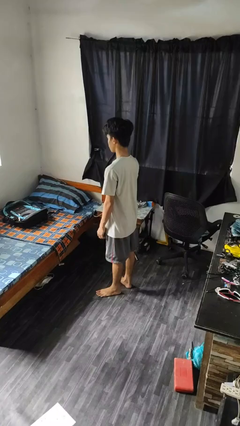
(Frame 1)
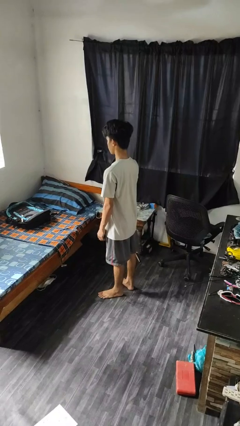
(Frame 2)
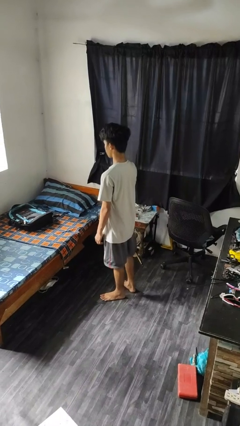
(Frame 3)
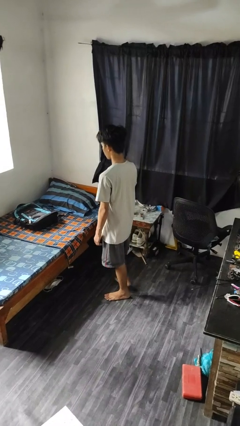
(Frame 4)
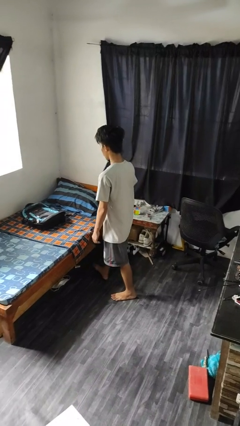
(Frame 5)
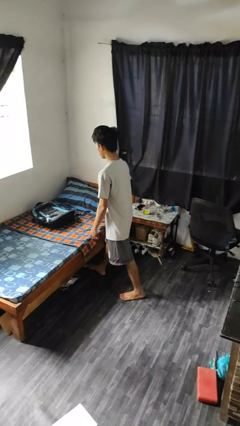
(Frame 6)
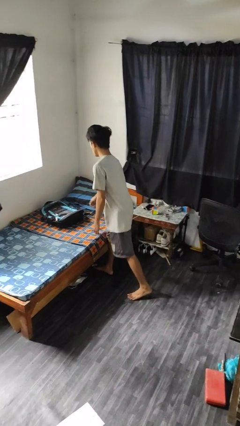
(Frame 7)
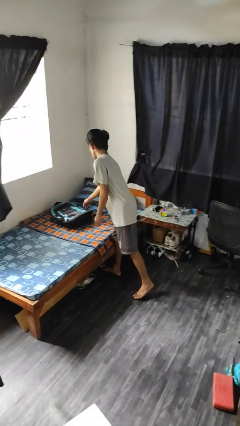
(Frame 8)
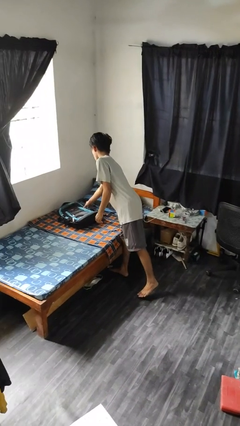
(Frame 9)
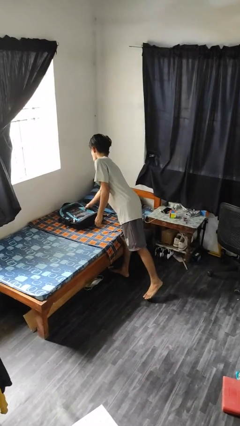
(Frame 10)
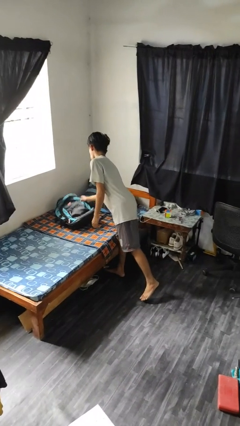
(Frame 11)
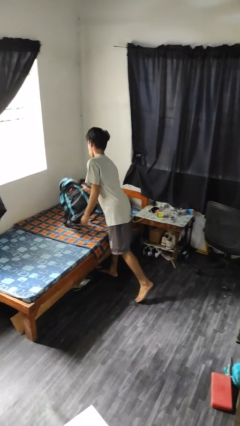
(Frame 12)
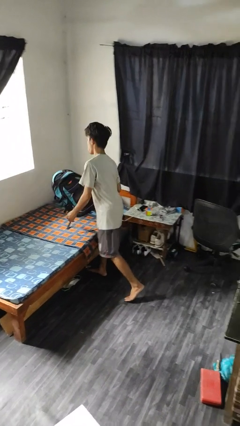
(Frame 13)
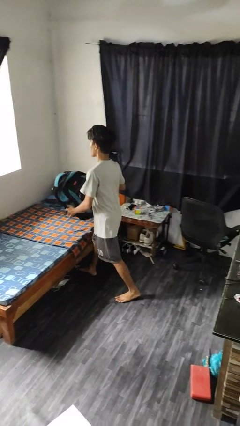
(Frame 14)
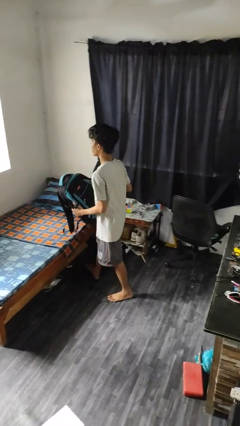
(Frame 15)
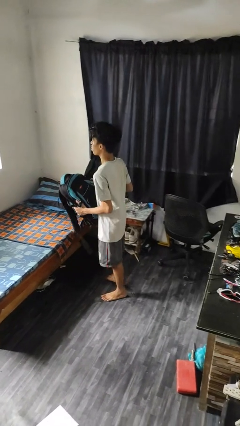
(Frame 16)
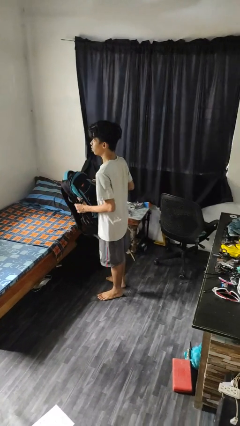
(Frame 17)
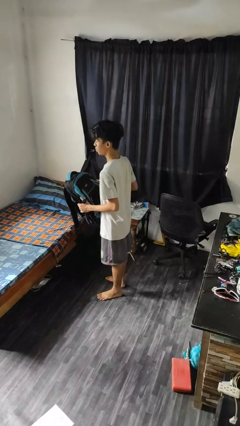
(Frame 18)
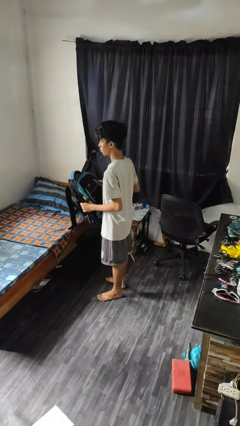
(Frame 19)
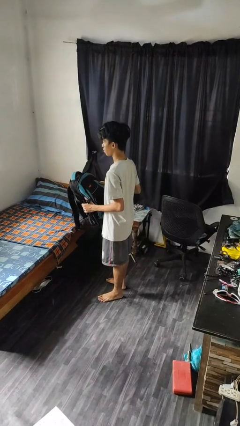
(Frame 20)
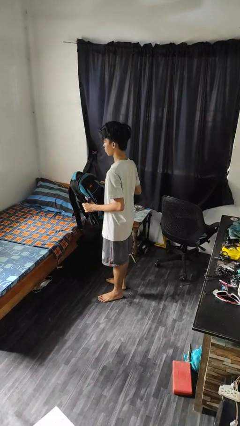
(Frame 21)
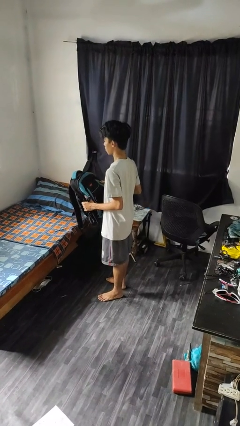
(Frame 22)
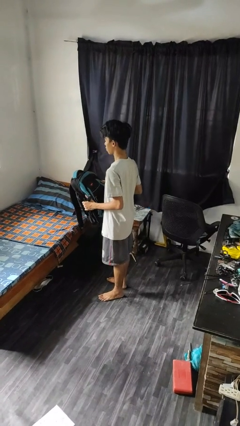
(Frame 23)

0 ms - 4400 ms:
person picks up object from bed

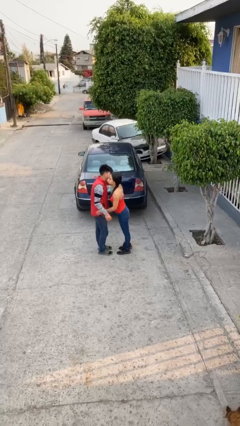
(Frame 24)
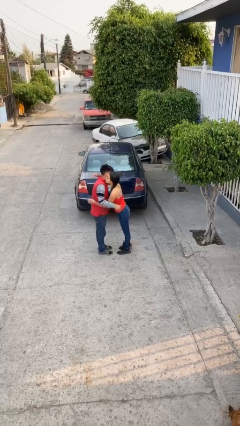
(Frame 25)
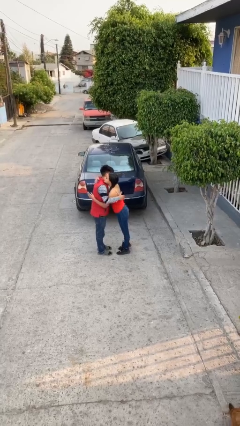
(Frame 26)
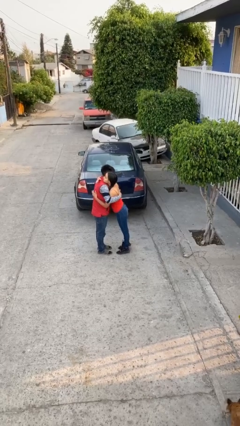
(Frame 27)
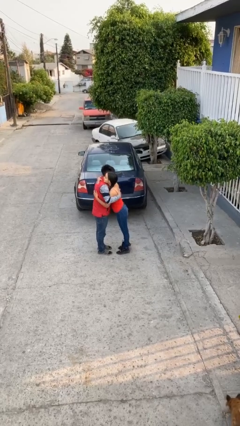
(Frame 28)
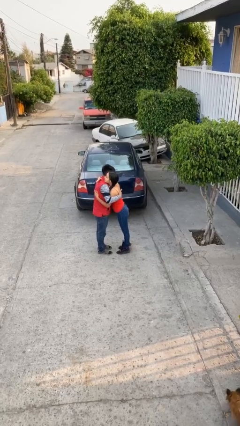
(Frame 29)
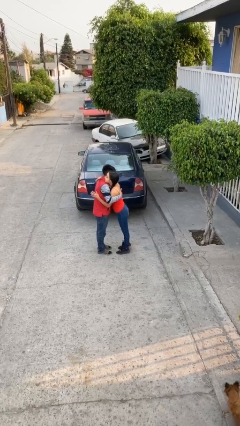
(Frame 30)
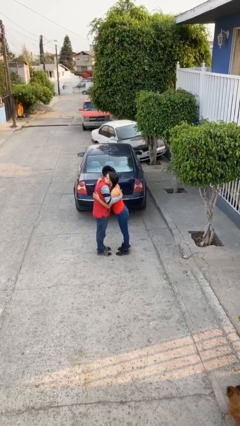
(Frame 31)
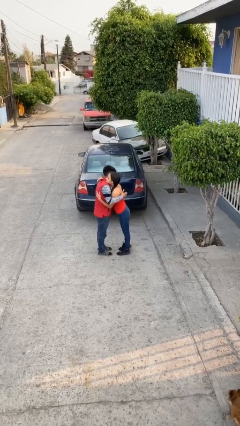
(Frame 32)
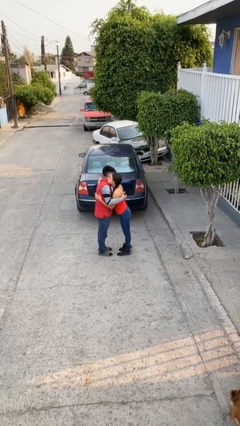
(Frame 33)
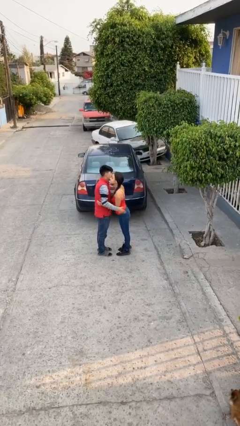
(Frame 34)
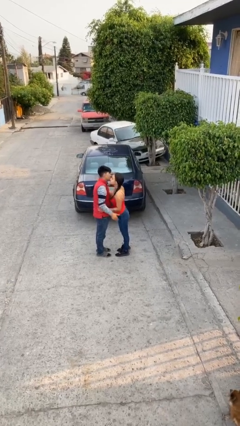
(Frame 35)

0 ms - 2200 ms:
person embraces person

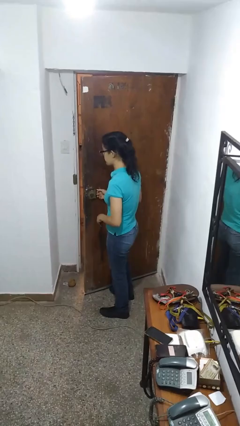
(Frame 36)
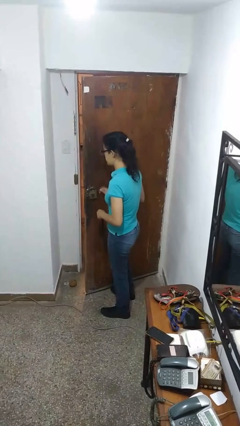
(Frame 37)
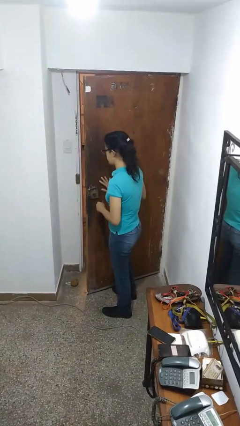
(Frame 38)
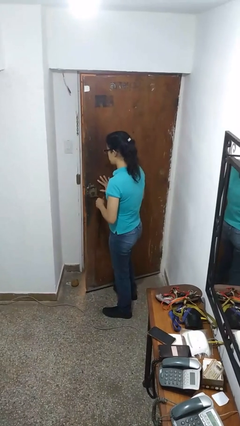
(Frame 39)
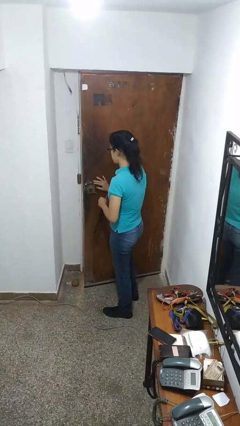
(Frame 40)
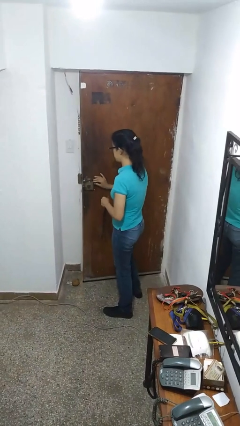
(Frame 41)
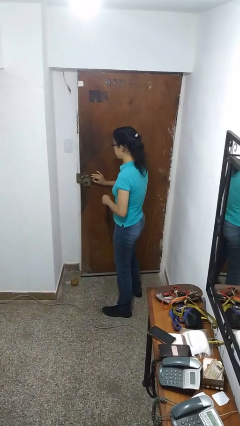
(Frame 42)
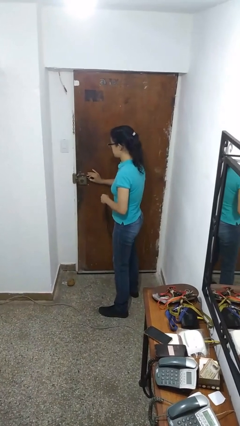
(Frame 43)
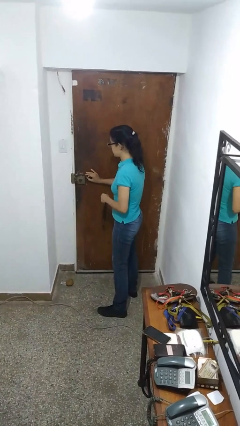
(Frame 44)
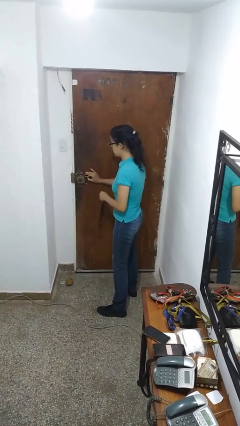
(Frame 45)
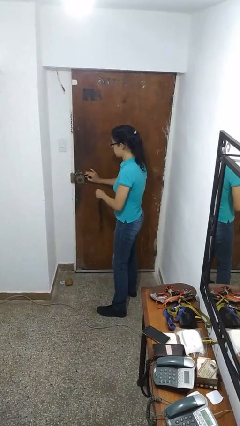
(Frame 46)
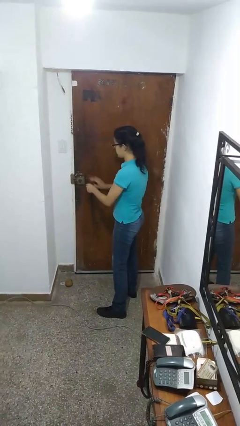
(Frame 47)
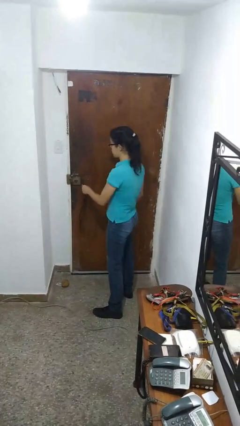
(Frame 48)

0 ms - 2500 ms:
person closes facility door

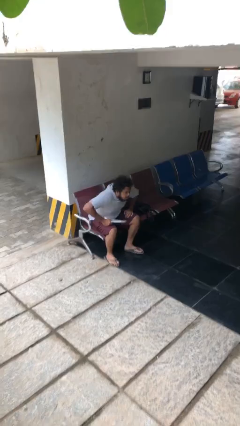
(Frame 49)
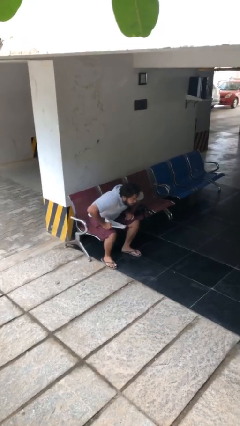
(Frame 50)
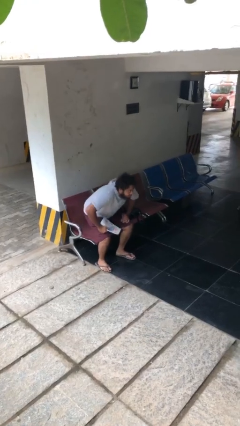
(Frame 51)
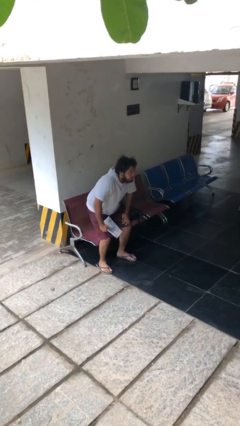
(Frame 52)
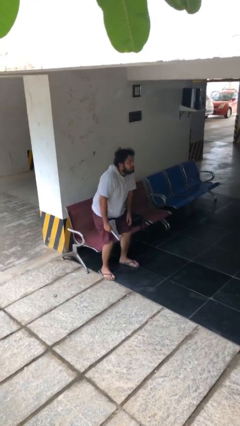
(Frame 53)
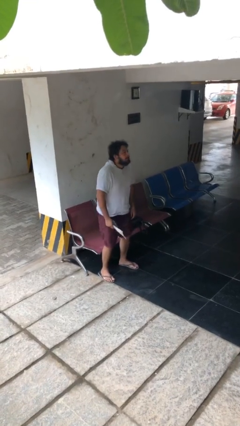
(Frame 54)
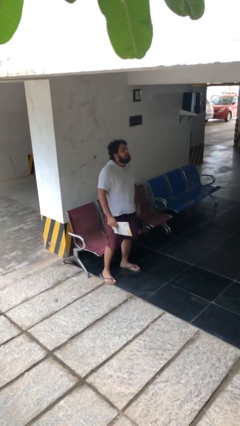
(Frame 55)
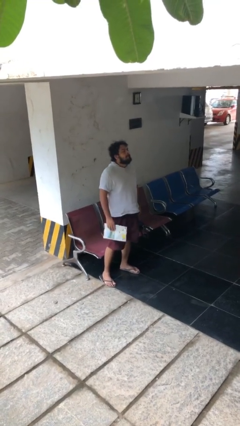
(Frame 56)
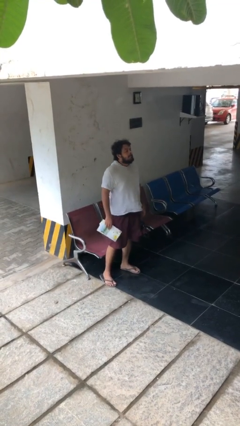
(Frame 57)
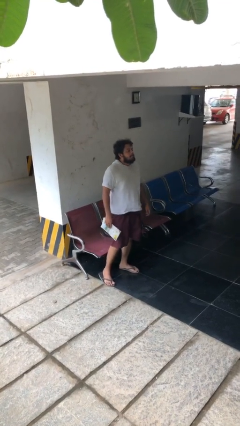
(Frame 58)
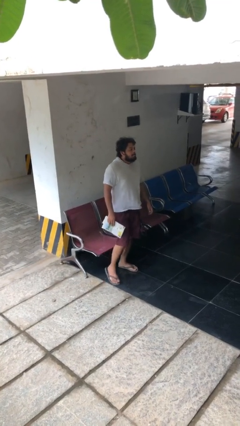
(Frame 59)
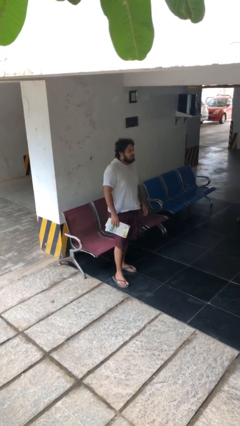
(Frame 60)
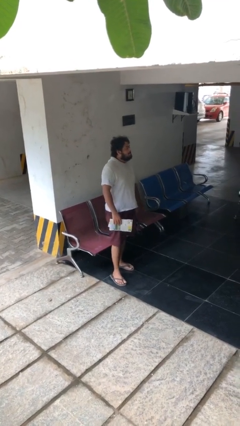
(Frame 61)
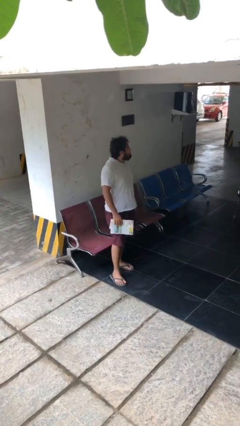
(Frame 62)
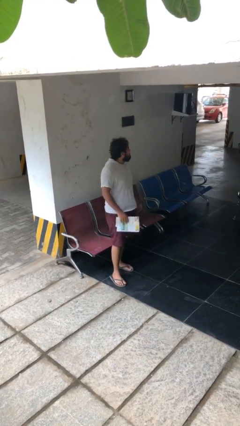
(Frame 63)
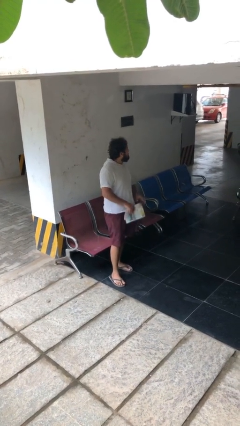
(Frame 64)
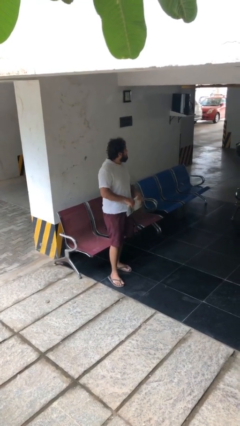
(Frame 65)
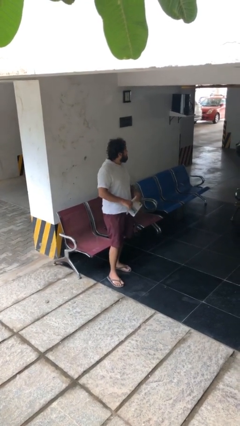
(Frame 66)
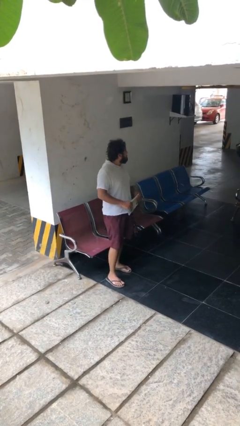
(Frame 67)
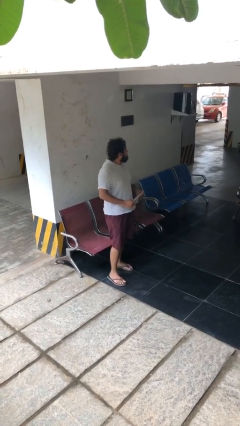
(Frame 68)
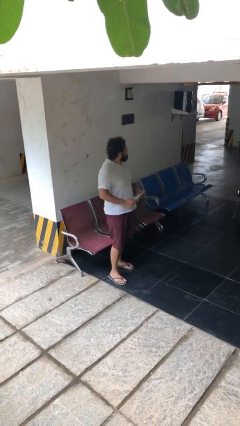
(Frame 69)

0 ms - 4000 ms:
person stands up

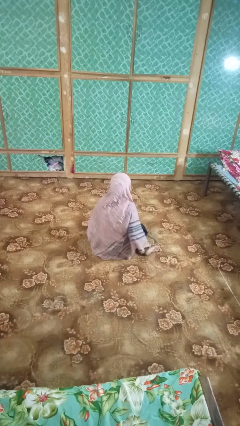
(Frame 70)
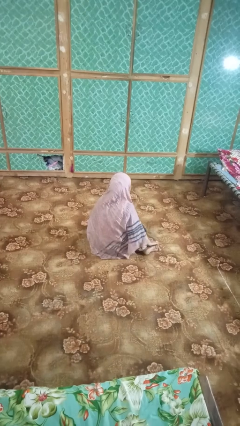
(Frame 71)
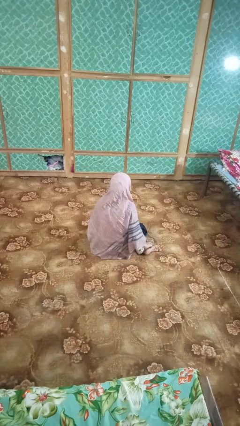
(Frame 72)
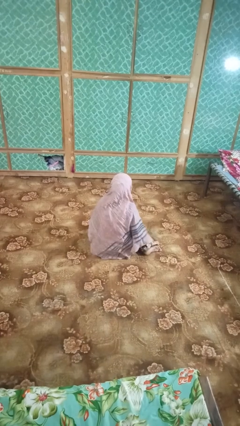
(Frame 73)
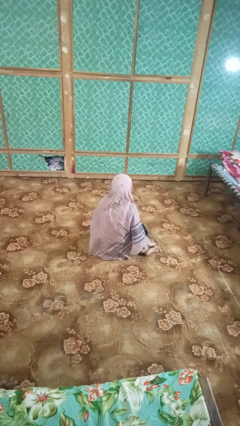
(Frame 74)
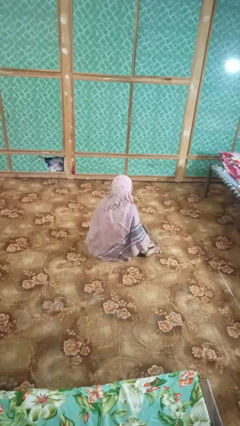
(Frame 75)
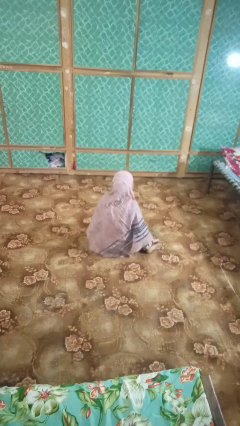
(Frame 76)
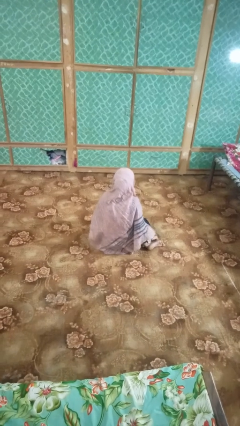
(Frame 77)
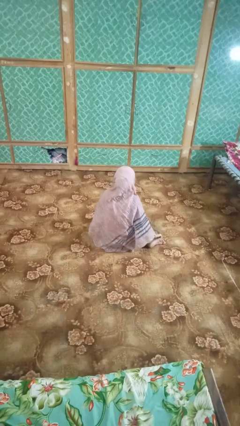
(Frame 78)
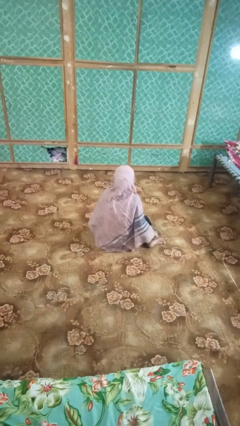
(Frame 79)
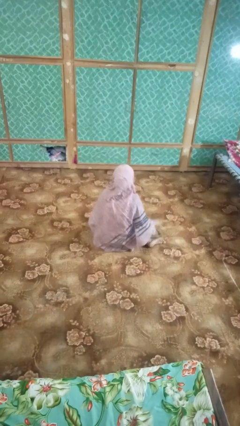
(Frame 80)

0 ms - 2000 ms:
person rubs foot

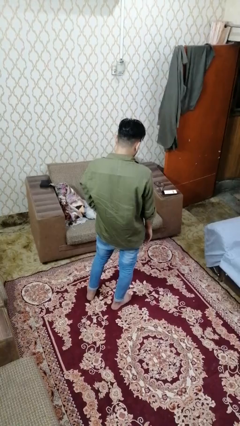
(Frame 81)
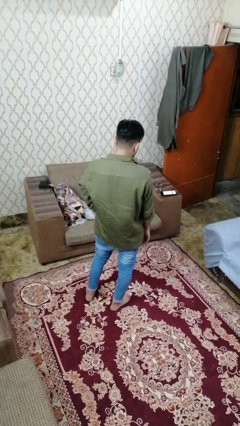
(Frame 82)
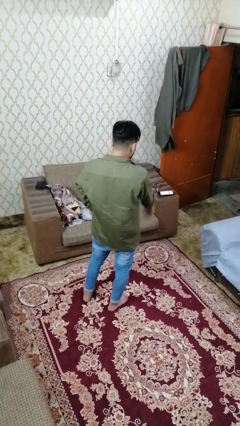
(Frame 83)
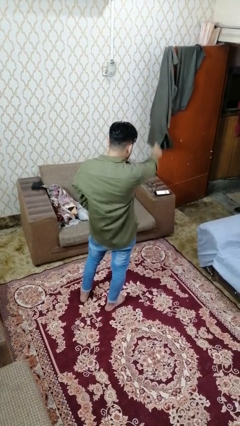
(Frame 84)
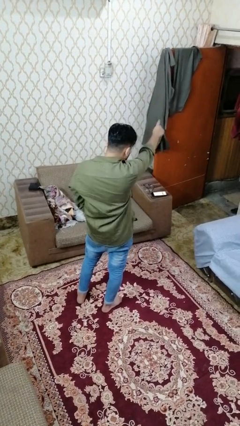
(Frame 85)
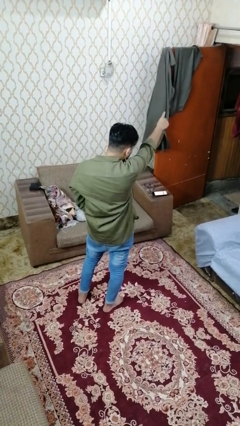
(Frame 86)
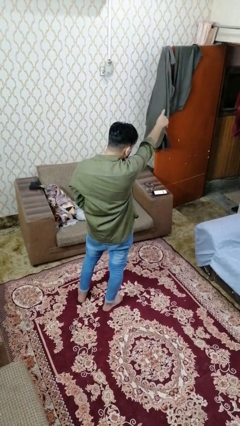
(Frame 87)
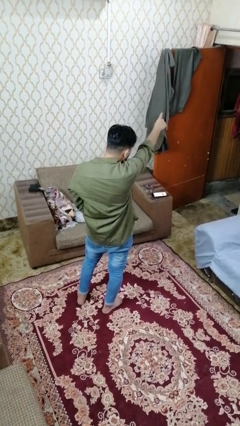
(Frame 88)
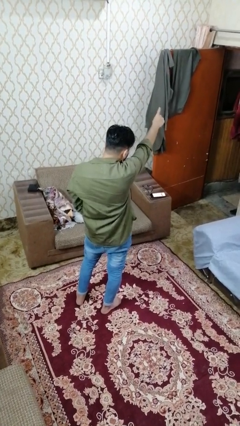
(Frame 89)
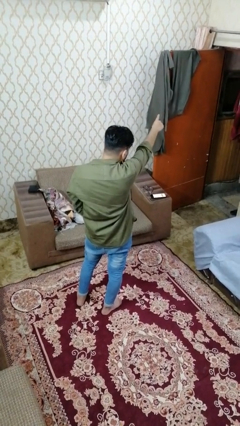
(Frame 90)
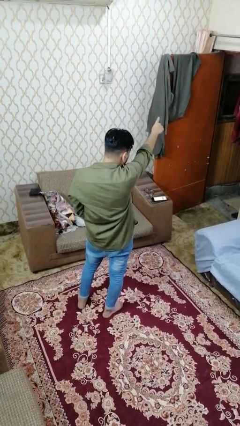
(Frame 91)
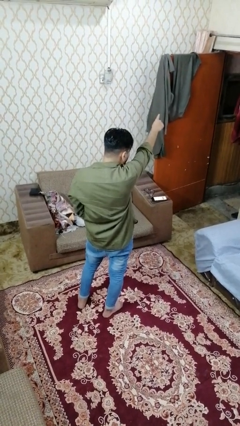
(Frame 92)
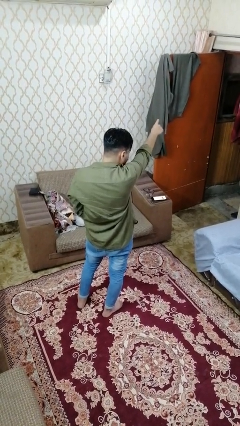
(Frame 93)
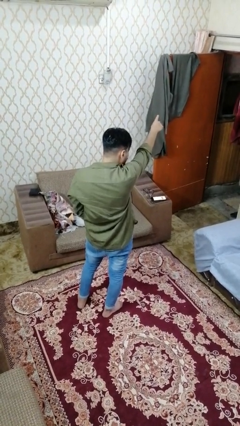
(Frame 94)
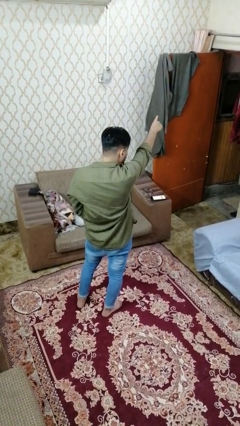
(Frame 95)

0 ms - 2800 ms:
person points at person
